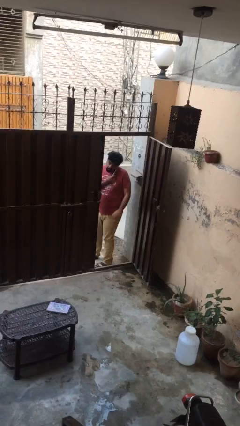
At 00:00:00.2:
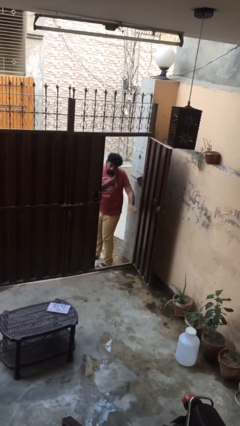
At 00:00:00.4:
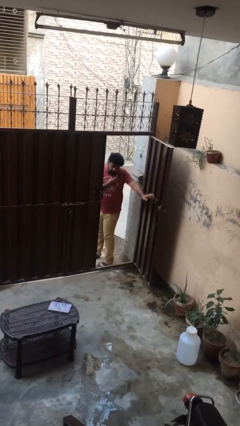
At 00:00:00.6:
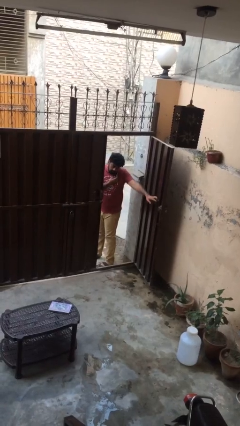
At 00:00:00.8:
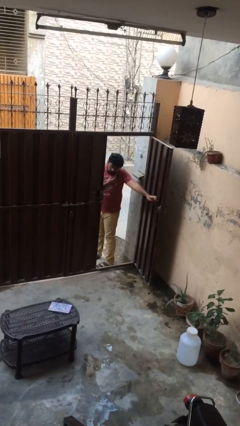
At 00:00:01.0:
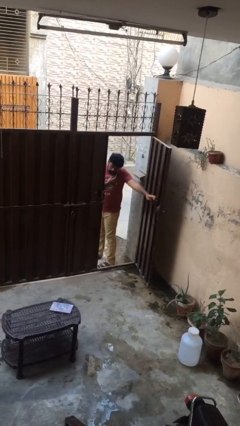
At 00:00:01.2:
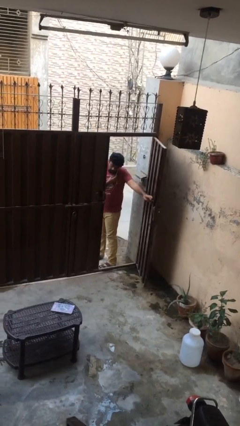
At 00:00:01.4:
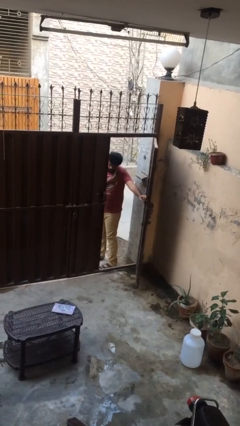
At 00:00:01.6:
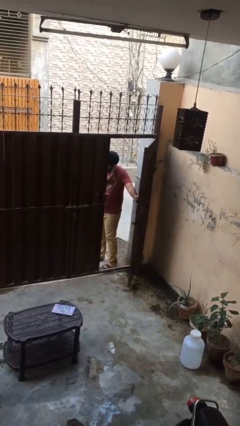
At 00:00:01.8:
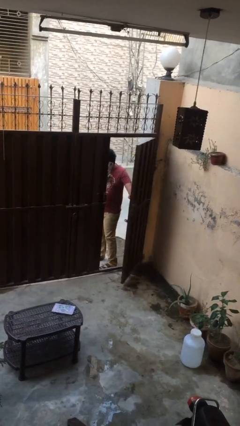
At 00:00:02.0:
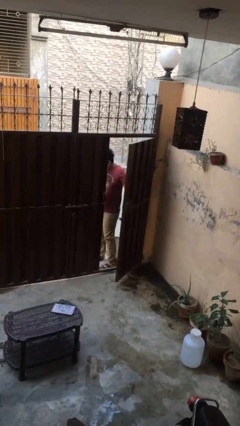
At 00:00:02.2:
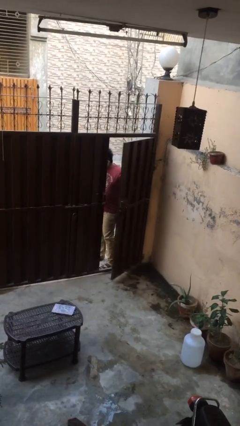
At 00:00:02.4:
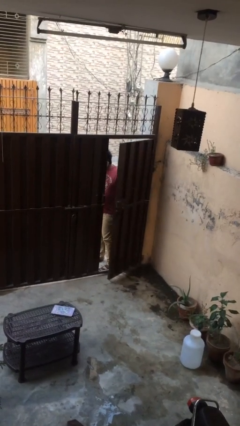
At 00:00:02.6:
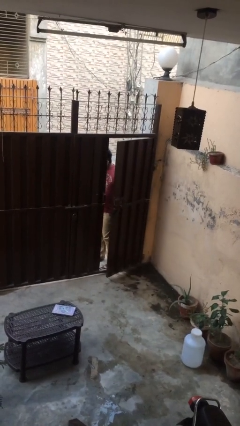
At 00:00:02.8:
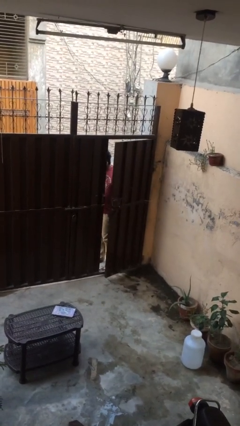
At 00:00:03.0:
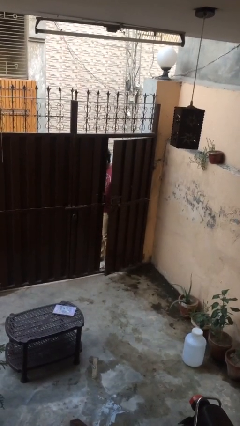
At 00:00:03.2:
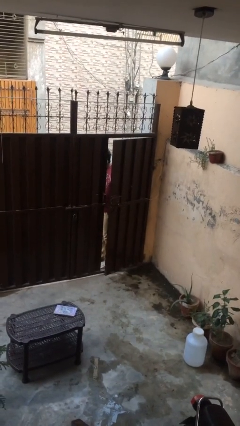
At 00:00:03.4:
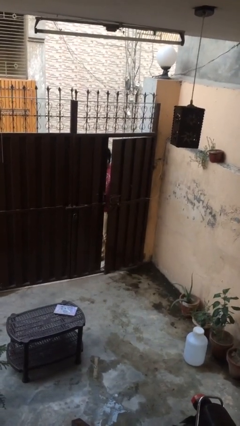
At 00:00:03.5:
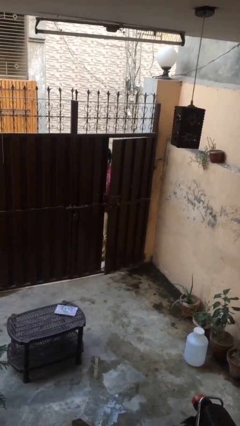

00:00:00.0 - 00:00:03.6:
person closes facility door

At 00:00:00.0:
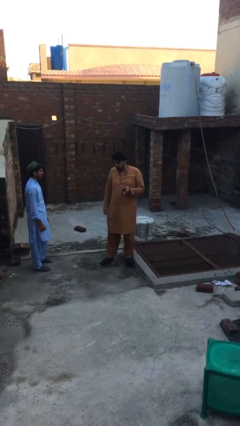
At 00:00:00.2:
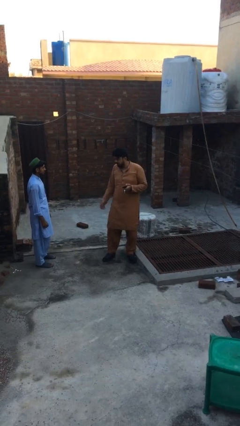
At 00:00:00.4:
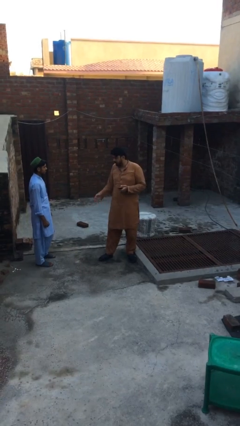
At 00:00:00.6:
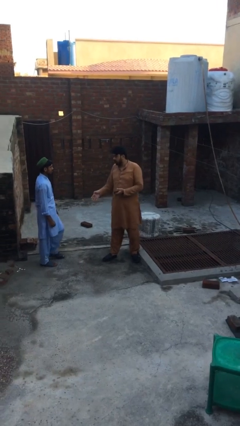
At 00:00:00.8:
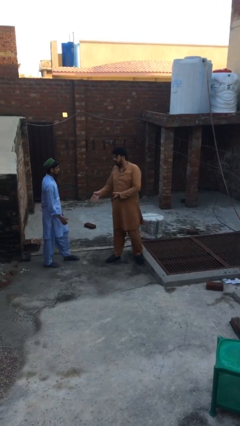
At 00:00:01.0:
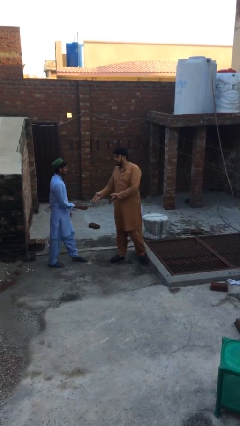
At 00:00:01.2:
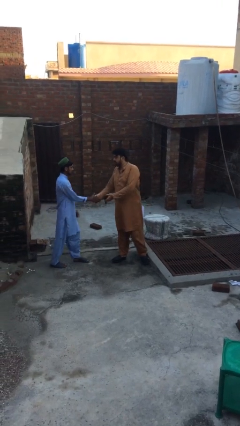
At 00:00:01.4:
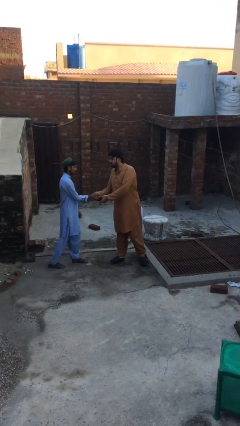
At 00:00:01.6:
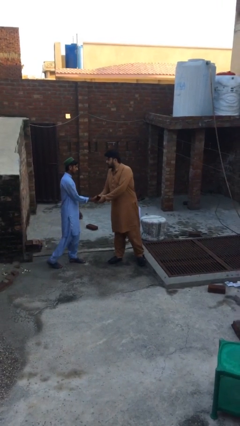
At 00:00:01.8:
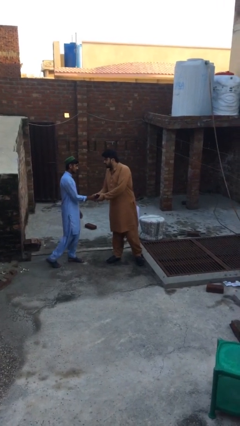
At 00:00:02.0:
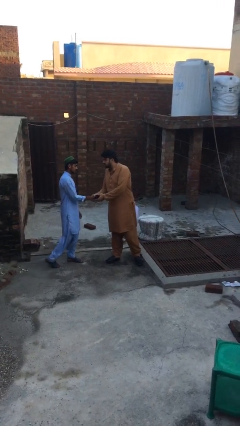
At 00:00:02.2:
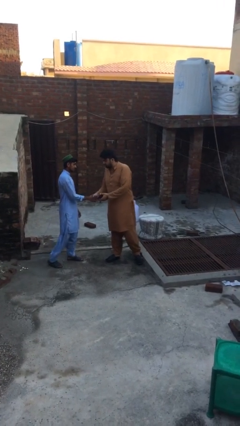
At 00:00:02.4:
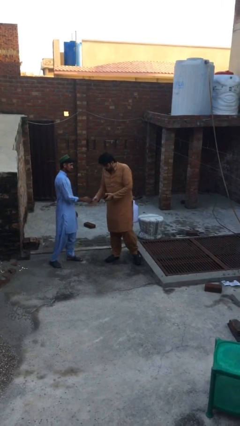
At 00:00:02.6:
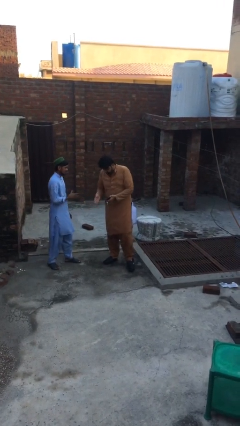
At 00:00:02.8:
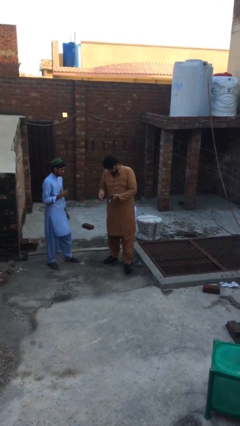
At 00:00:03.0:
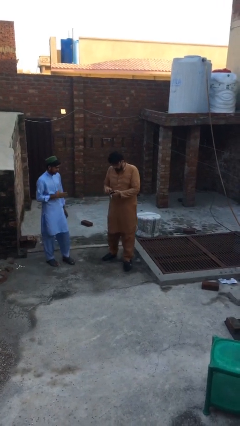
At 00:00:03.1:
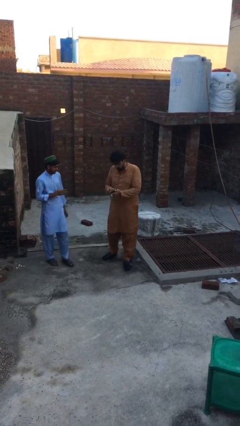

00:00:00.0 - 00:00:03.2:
person shakes hand

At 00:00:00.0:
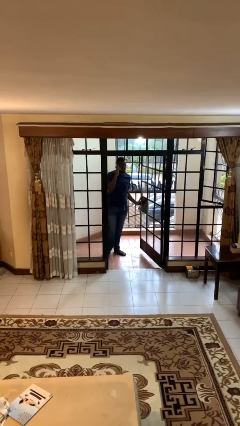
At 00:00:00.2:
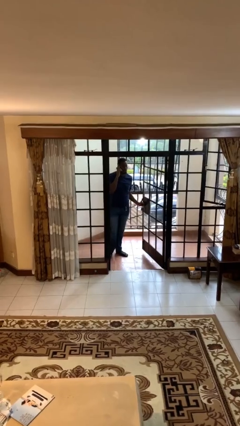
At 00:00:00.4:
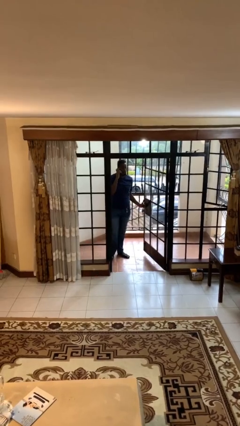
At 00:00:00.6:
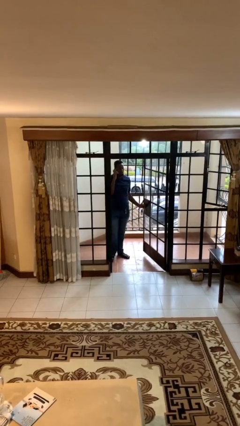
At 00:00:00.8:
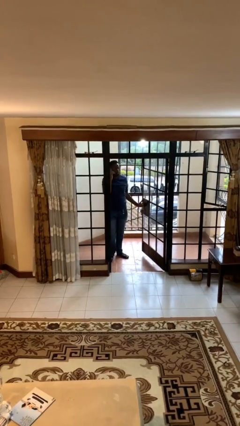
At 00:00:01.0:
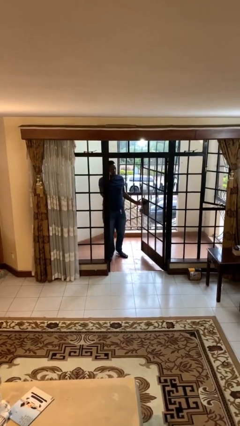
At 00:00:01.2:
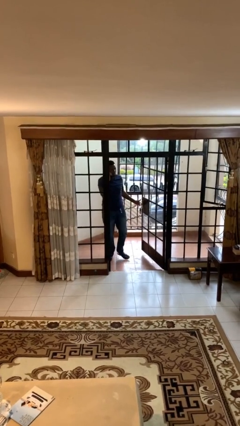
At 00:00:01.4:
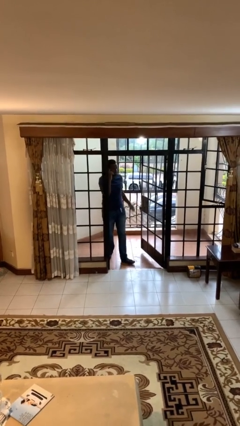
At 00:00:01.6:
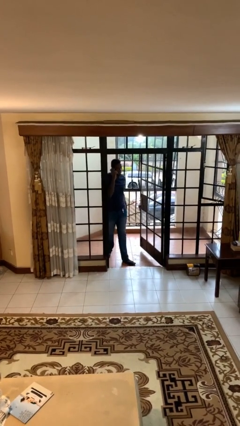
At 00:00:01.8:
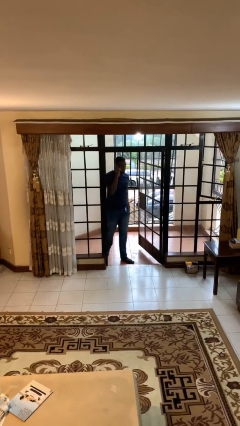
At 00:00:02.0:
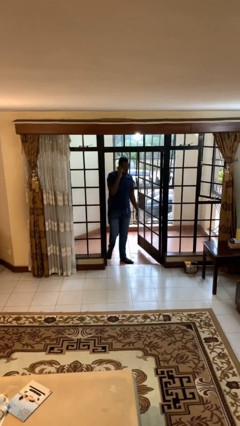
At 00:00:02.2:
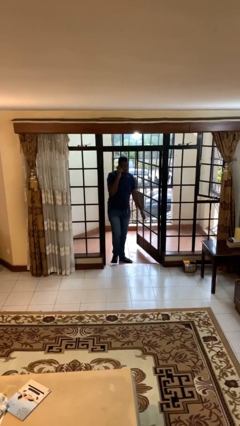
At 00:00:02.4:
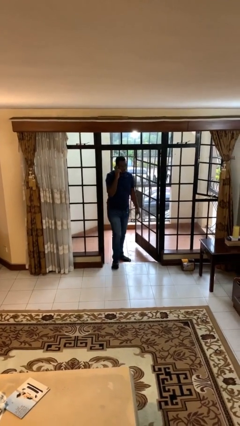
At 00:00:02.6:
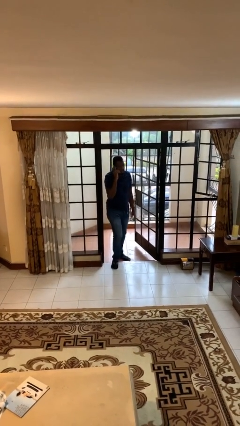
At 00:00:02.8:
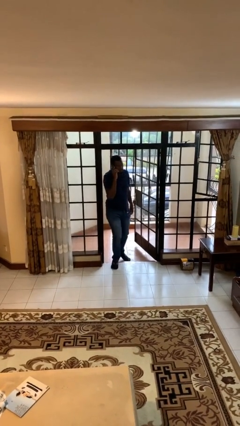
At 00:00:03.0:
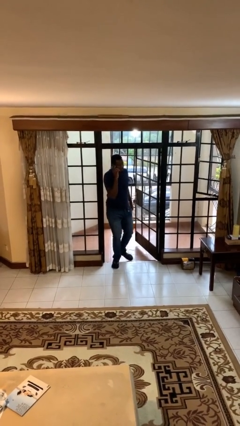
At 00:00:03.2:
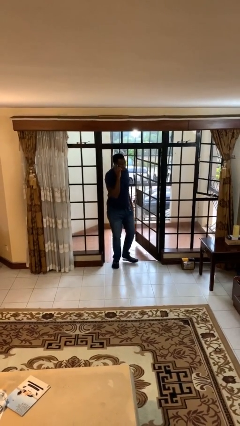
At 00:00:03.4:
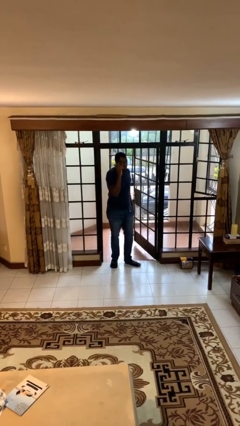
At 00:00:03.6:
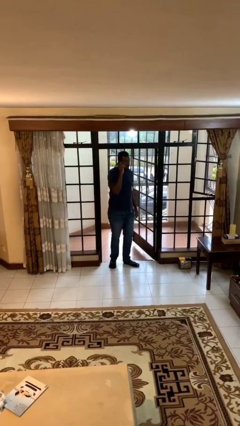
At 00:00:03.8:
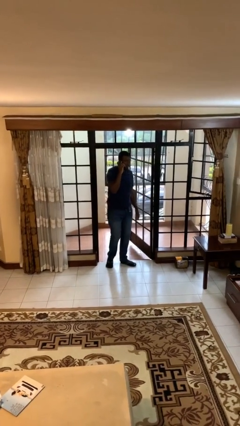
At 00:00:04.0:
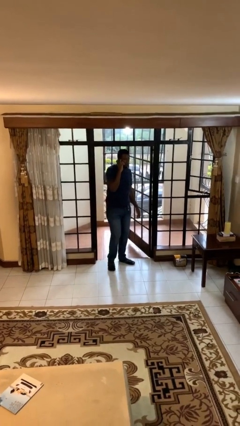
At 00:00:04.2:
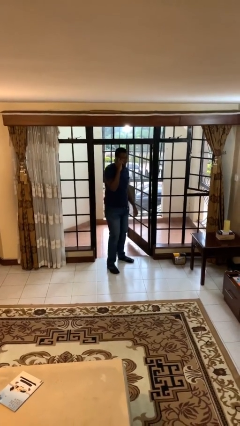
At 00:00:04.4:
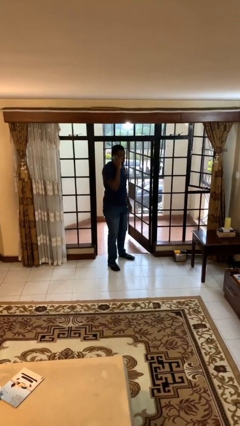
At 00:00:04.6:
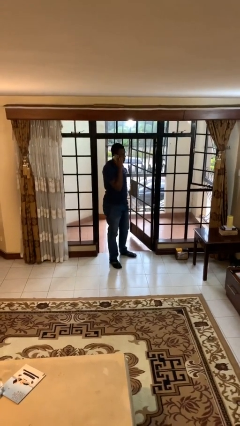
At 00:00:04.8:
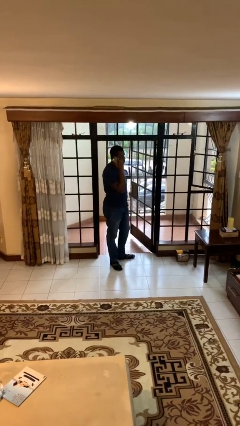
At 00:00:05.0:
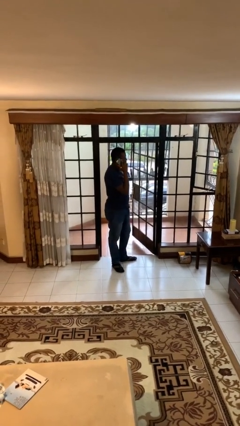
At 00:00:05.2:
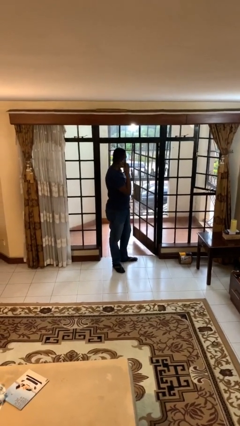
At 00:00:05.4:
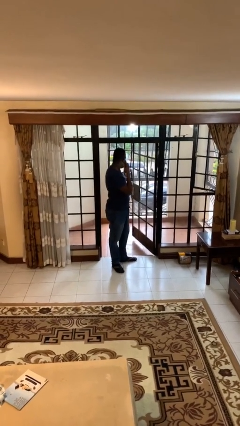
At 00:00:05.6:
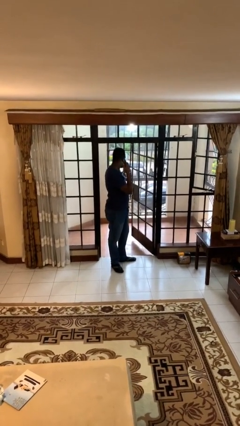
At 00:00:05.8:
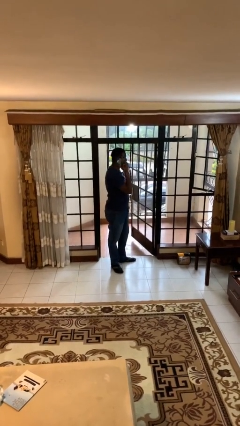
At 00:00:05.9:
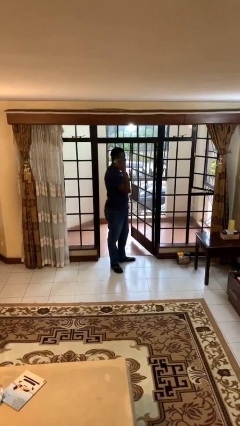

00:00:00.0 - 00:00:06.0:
person enters scene through structure

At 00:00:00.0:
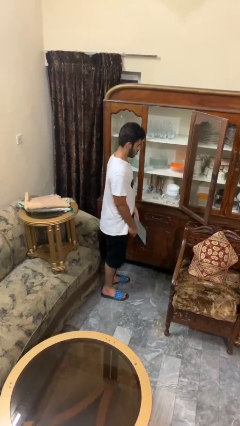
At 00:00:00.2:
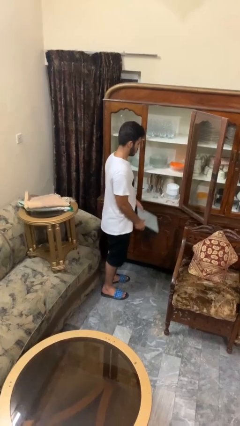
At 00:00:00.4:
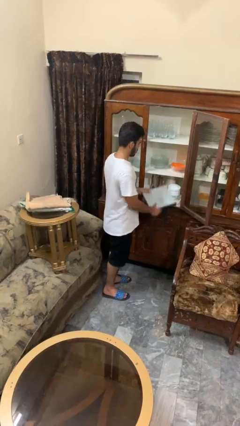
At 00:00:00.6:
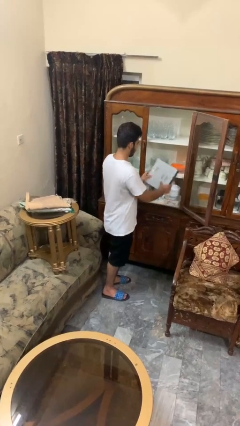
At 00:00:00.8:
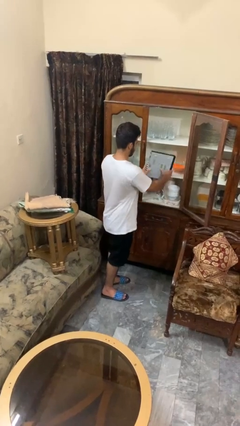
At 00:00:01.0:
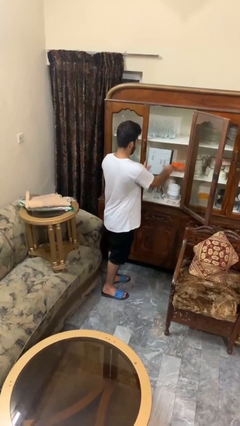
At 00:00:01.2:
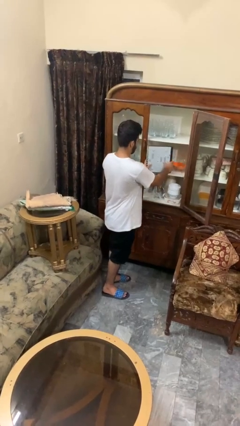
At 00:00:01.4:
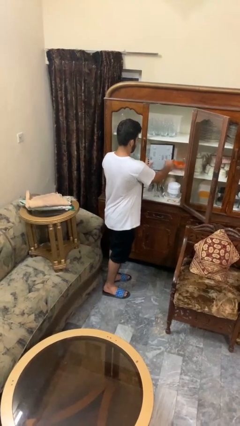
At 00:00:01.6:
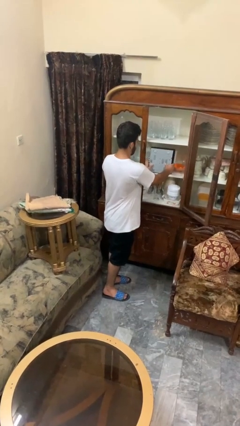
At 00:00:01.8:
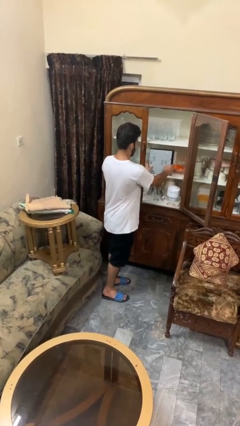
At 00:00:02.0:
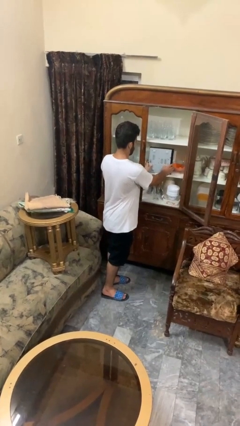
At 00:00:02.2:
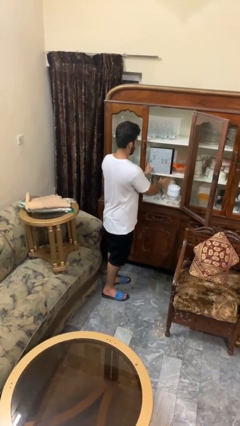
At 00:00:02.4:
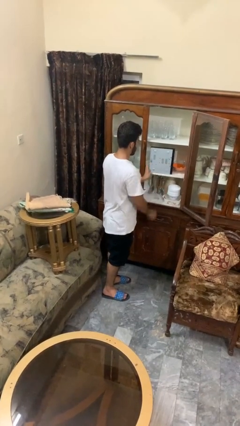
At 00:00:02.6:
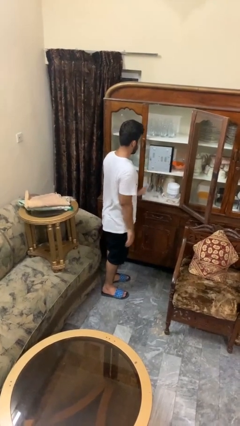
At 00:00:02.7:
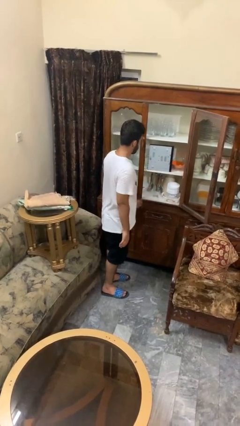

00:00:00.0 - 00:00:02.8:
person puts down object into cabinet

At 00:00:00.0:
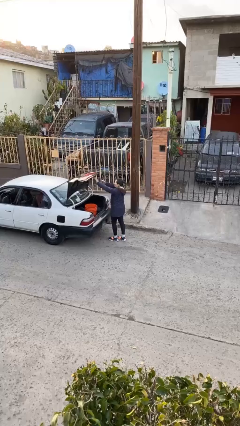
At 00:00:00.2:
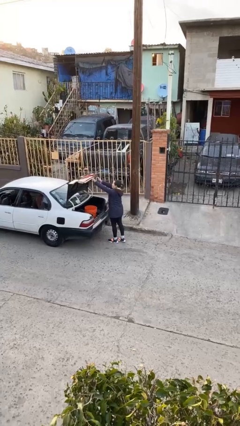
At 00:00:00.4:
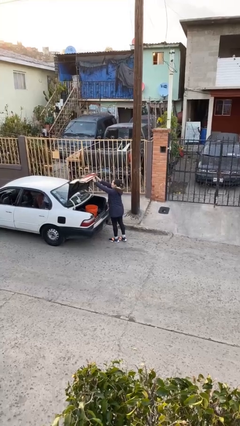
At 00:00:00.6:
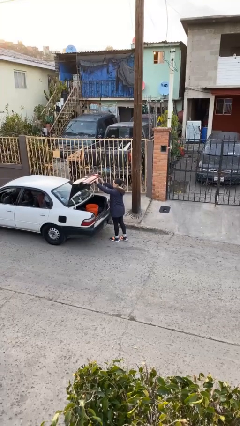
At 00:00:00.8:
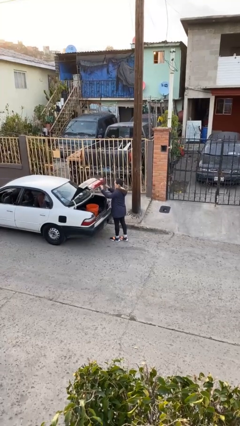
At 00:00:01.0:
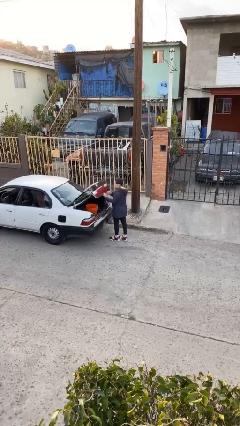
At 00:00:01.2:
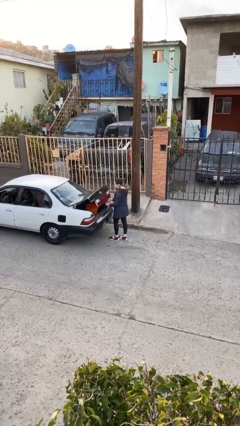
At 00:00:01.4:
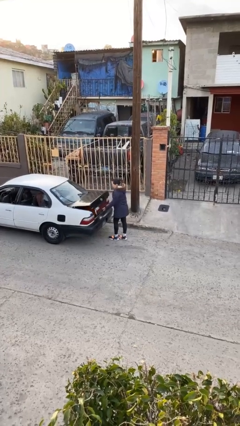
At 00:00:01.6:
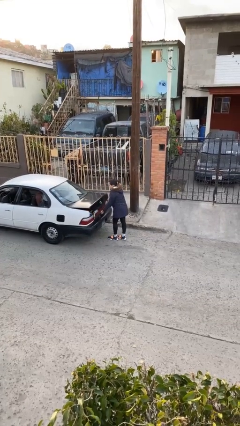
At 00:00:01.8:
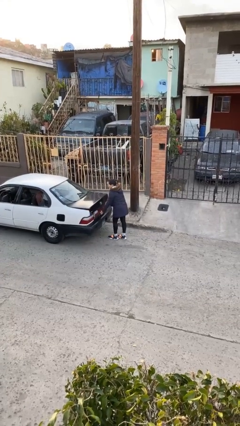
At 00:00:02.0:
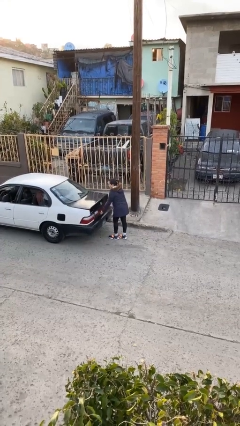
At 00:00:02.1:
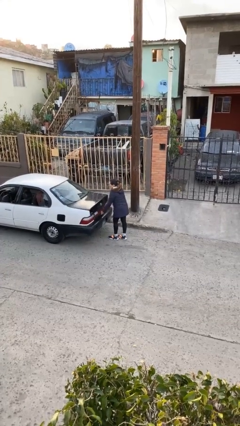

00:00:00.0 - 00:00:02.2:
person closes car trunk
